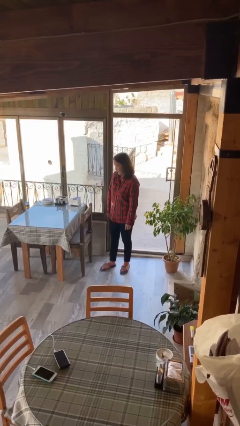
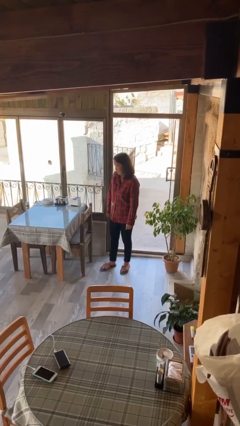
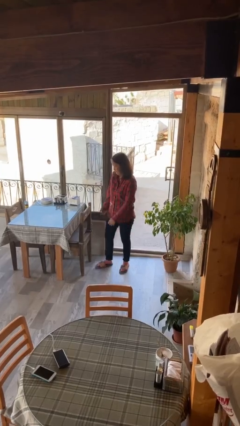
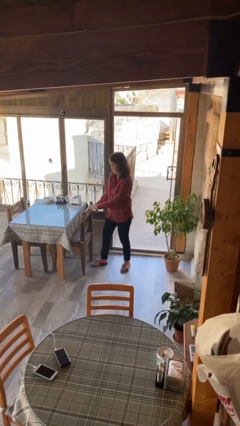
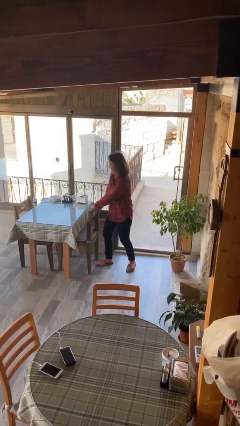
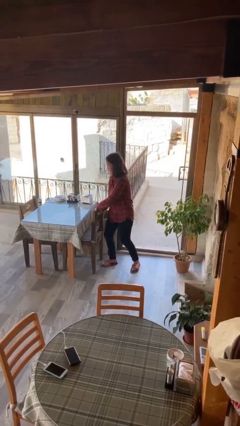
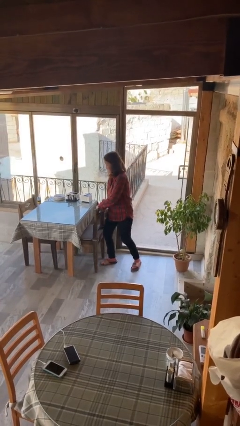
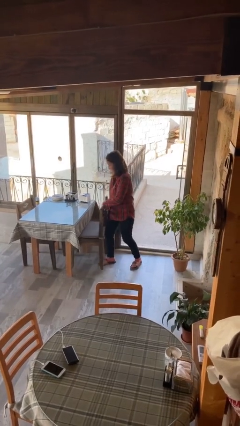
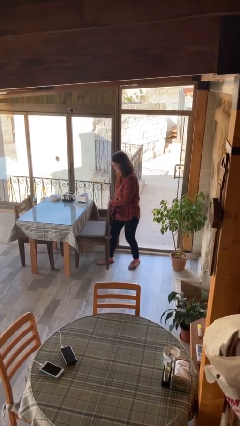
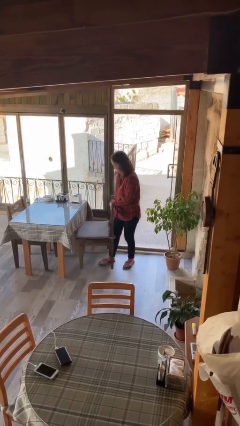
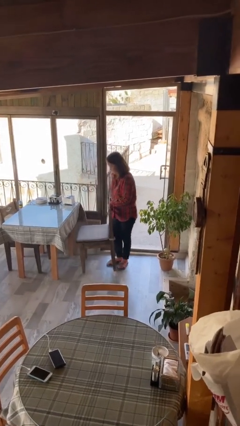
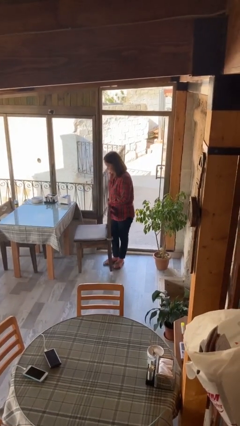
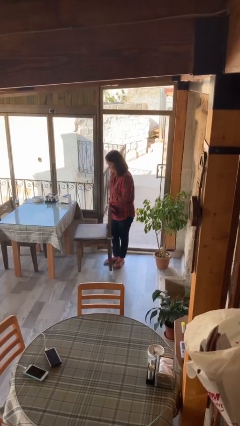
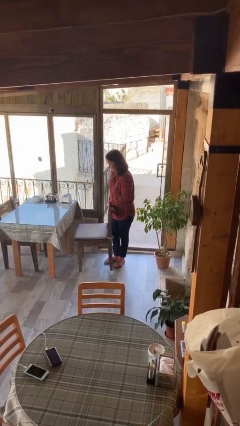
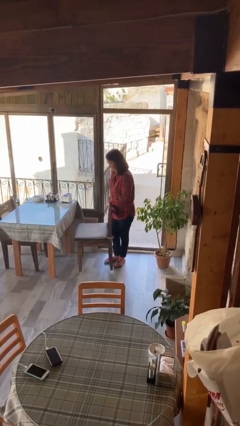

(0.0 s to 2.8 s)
person pulls out chair

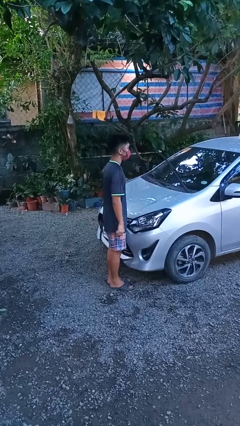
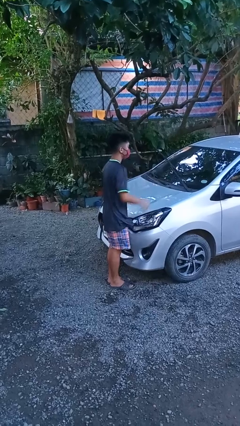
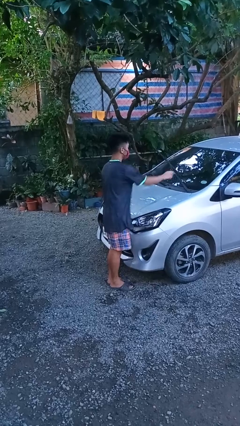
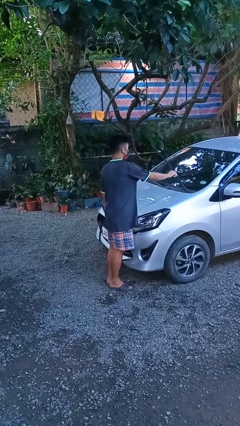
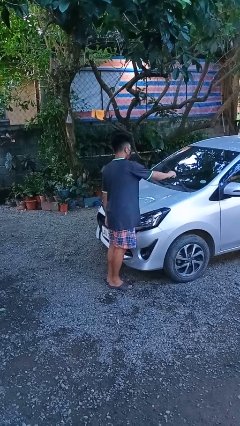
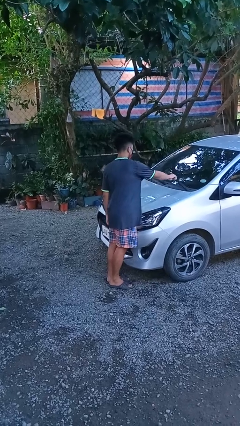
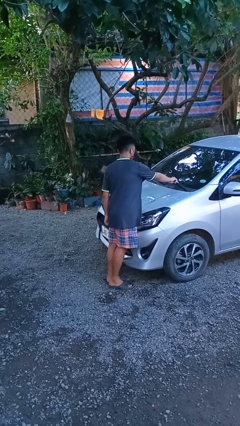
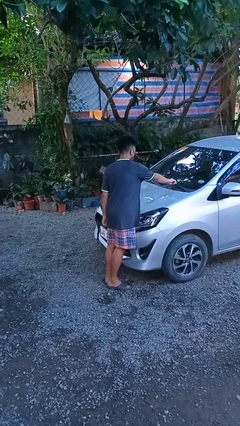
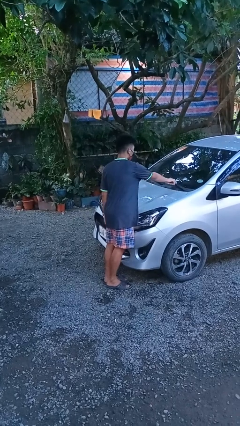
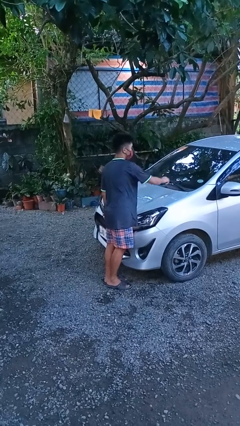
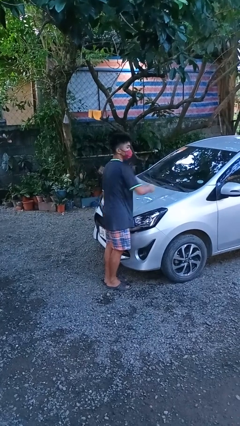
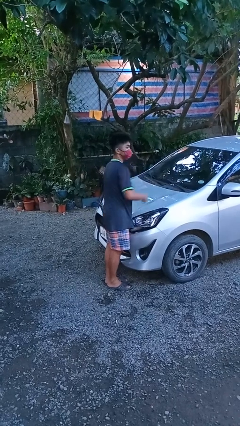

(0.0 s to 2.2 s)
person flips down car wipers

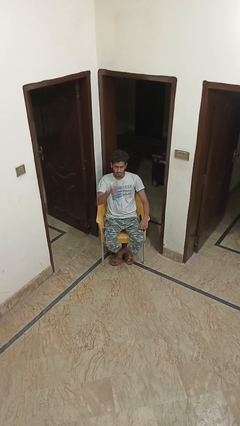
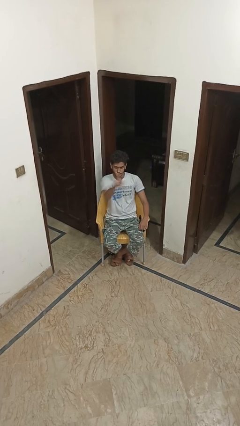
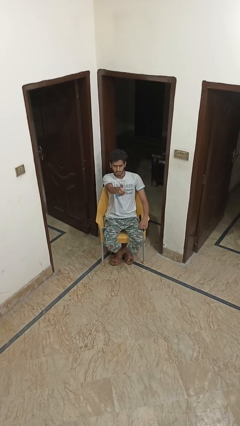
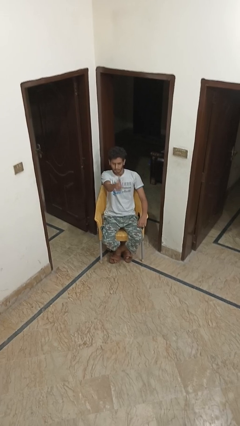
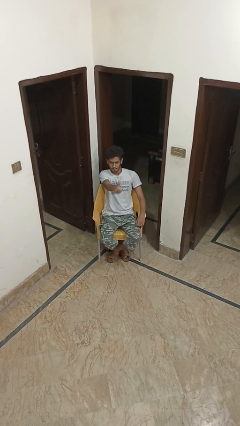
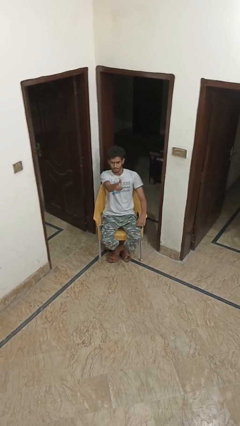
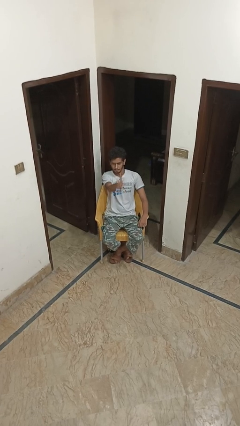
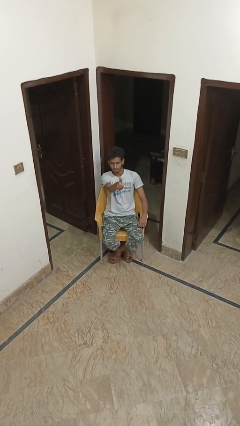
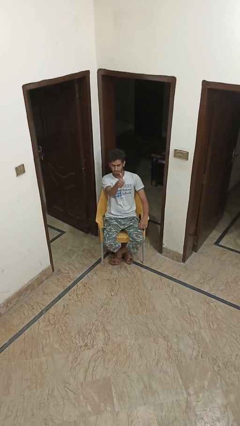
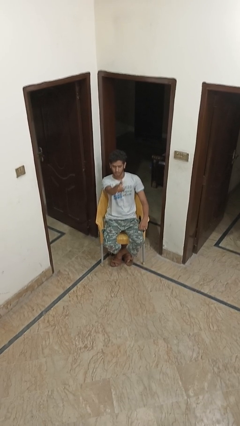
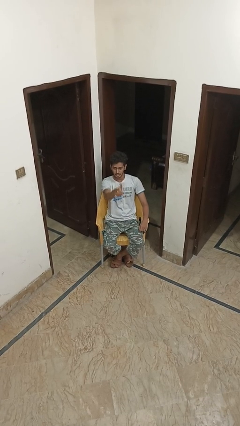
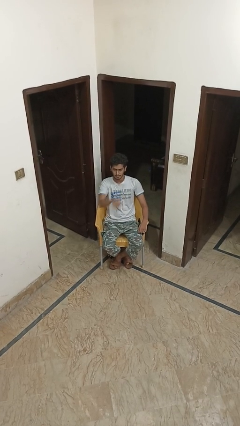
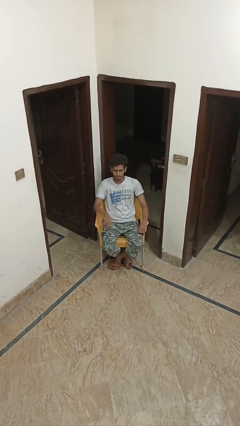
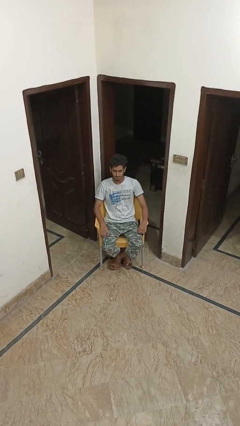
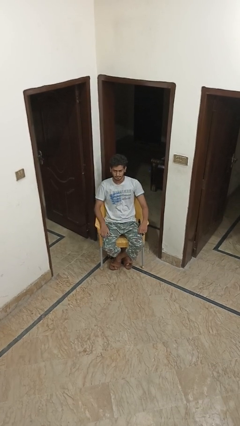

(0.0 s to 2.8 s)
person gestures thumbs up

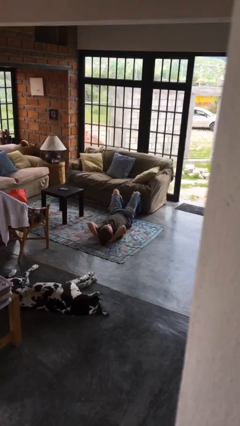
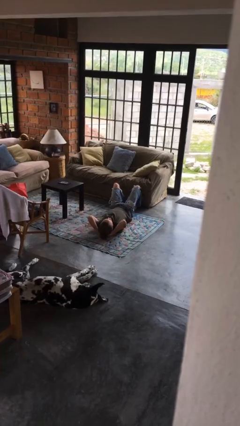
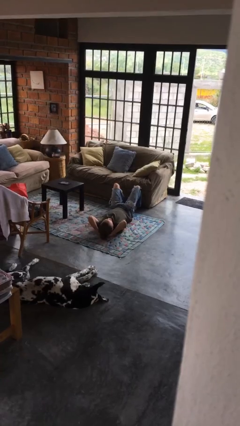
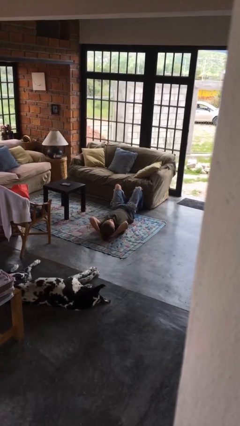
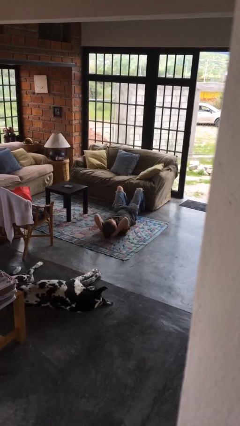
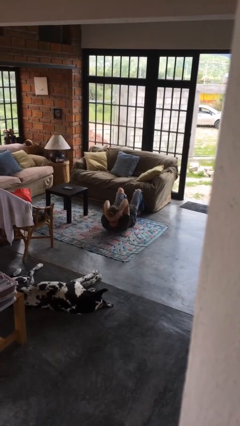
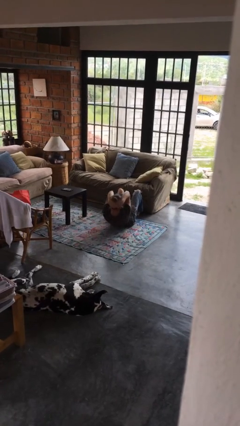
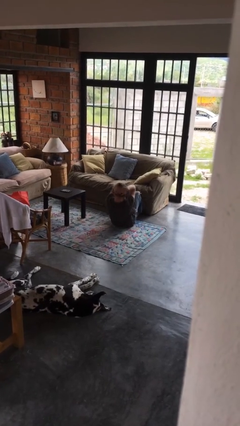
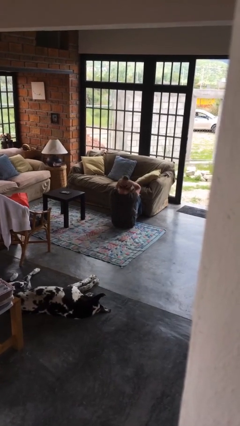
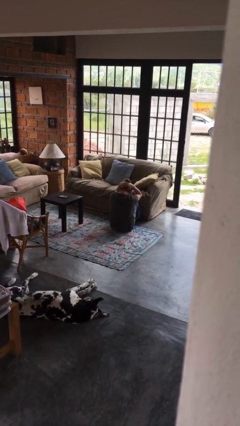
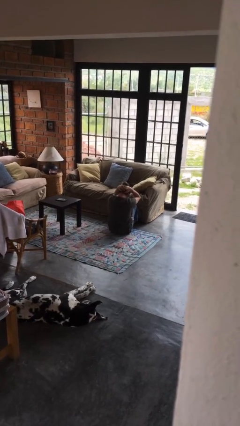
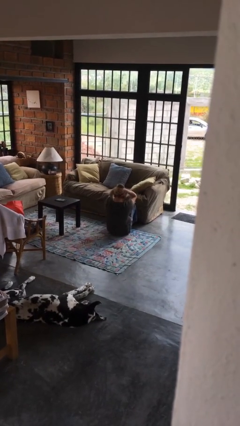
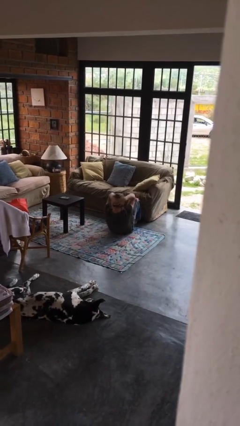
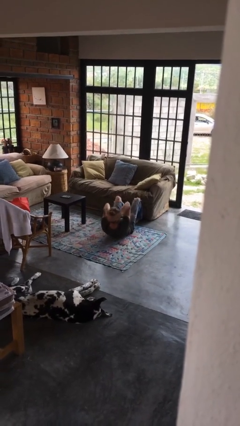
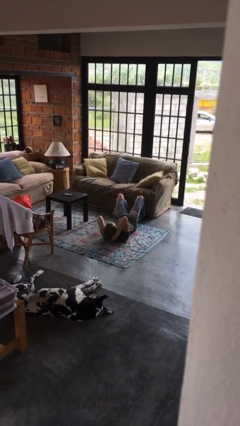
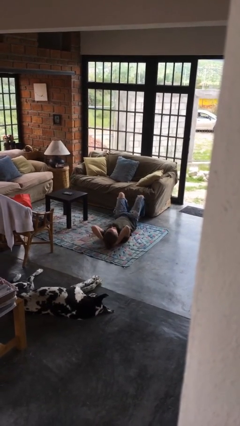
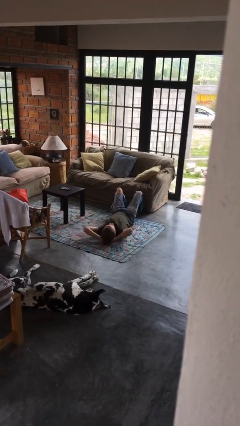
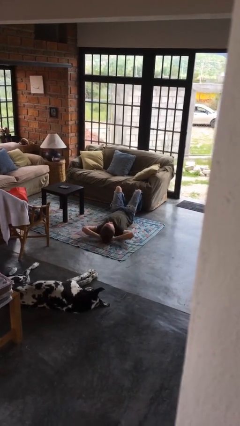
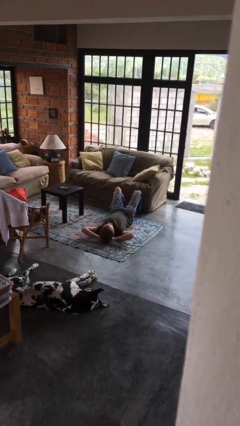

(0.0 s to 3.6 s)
person exercises with situp

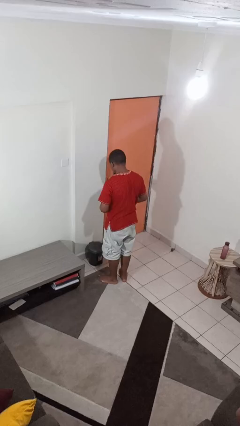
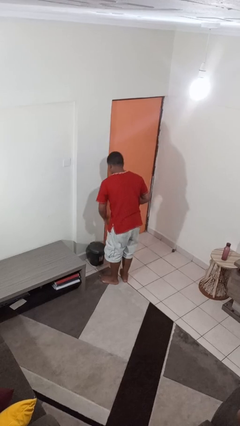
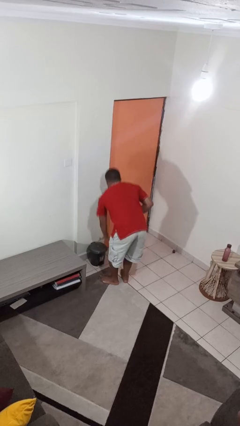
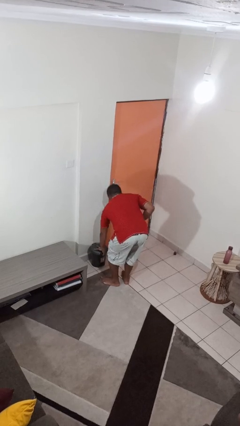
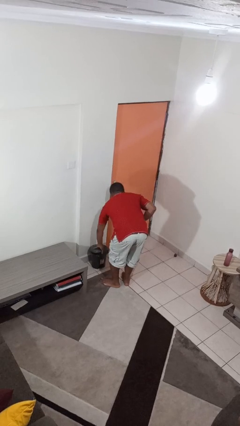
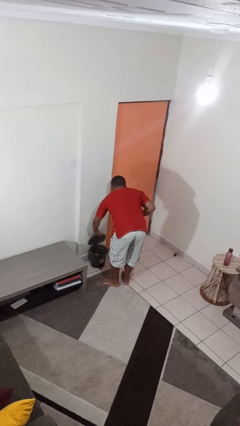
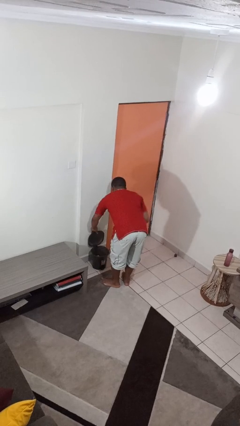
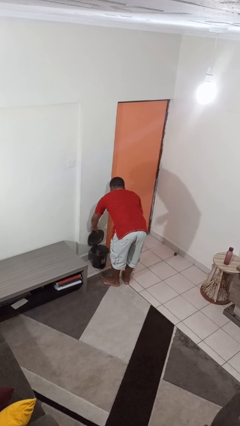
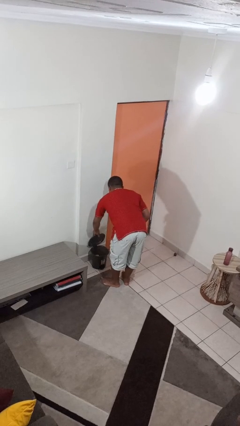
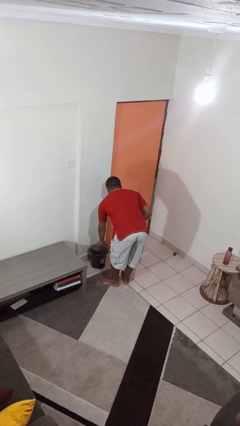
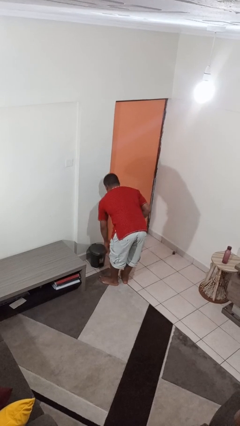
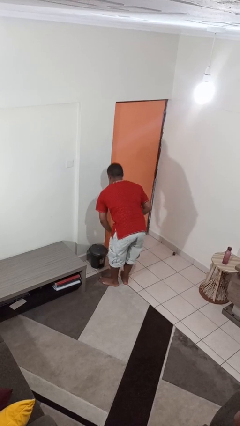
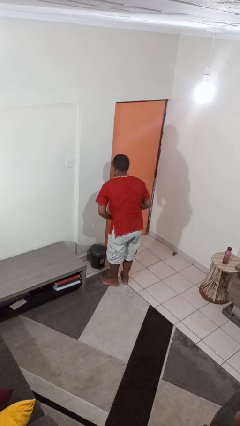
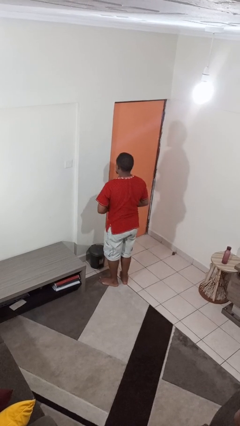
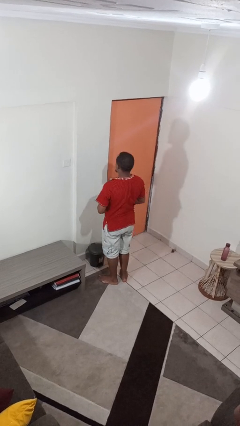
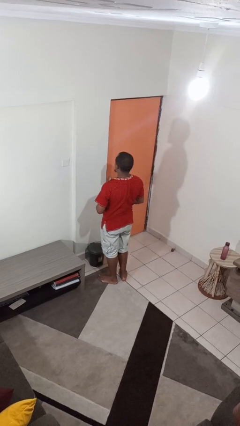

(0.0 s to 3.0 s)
person discards trash

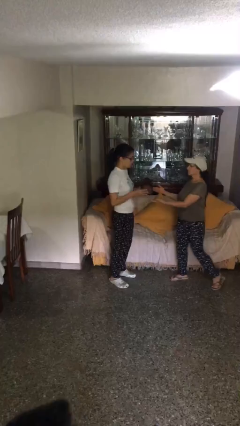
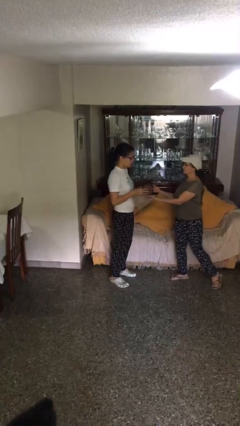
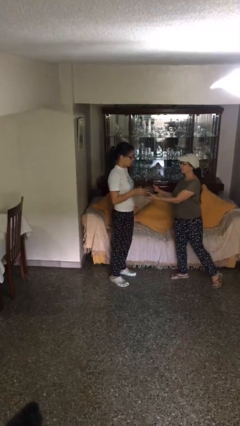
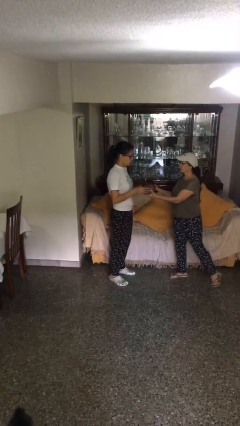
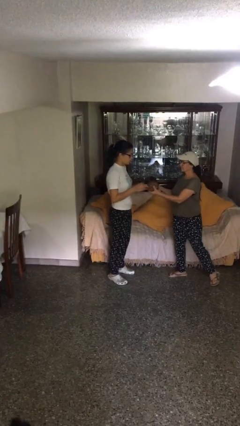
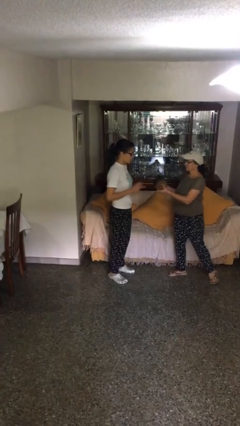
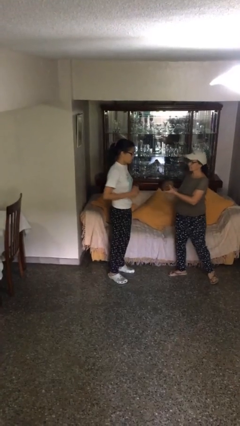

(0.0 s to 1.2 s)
person transfers object to person

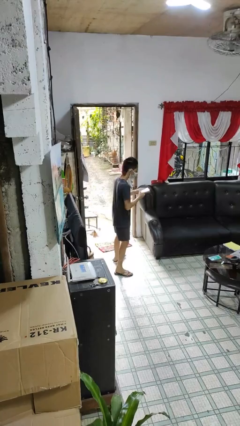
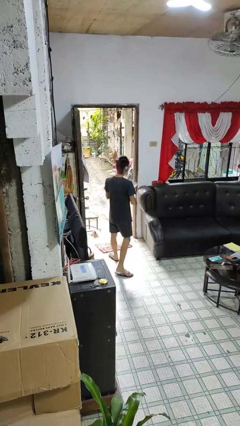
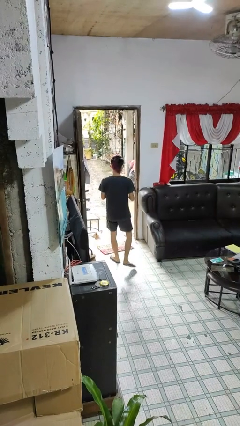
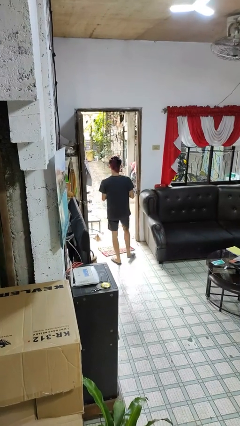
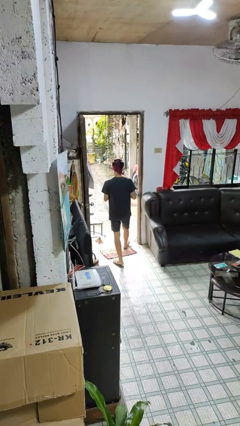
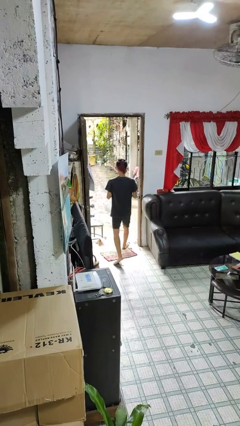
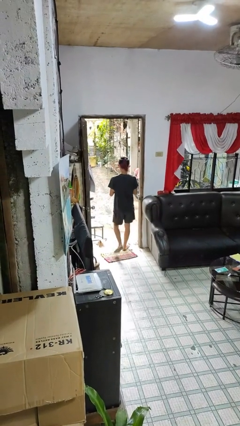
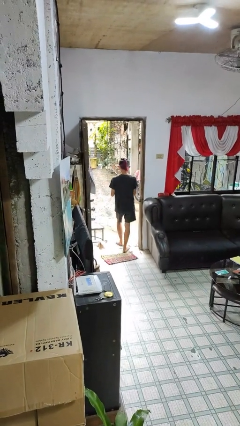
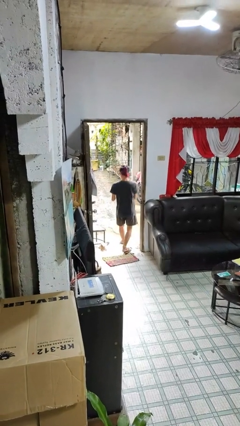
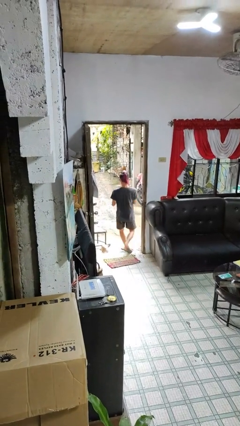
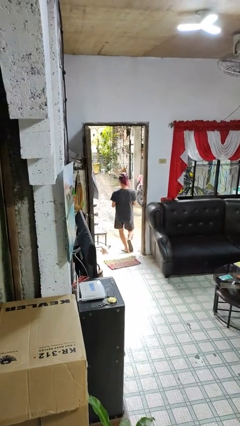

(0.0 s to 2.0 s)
person exits scene through structure
